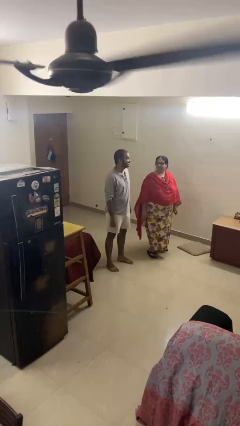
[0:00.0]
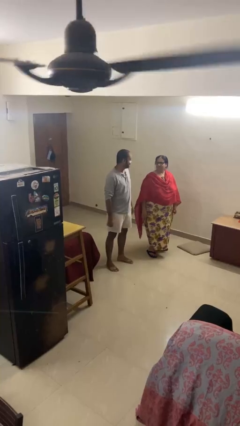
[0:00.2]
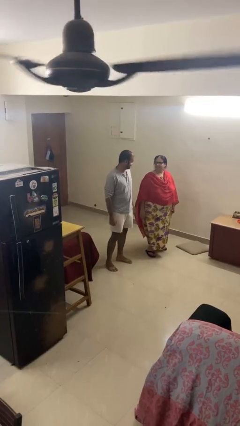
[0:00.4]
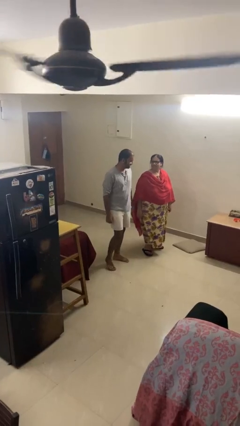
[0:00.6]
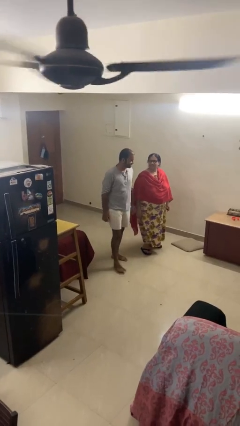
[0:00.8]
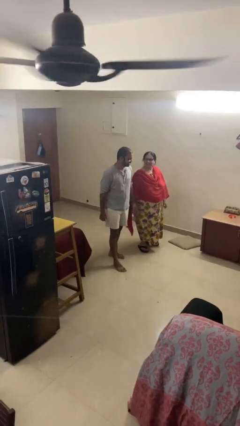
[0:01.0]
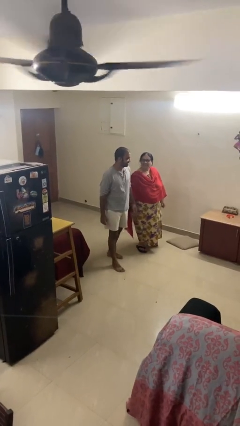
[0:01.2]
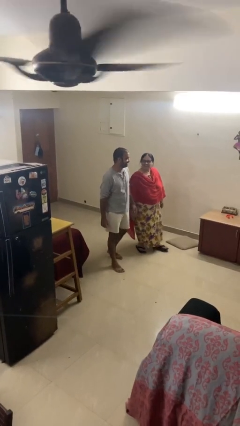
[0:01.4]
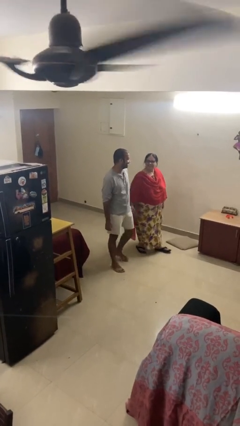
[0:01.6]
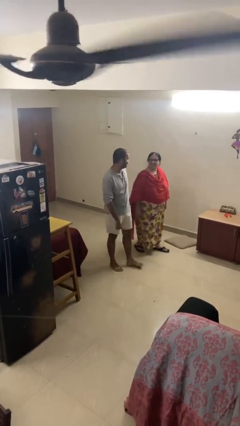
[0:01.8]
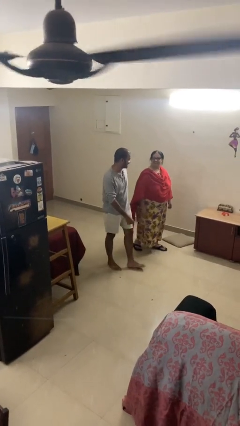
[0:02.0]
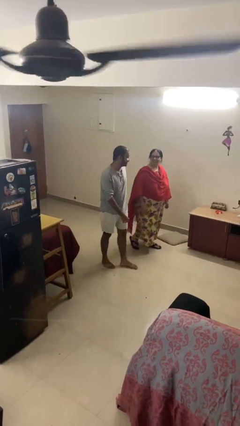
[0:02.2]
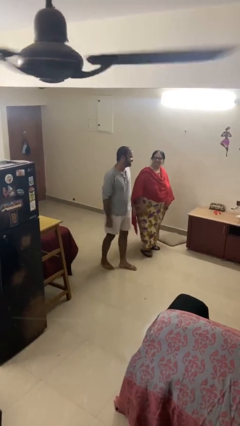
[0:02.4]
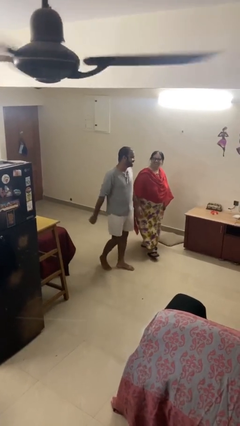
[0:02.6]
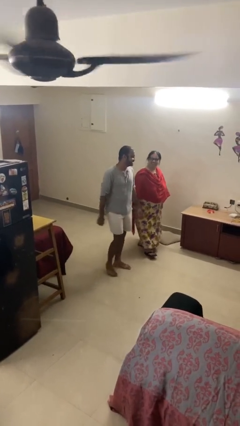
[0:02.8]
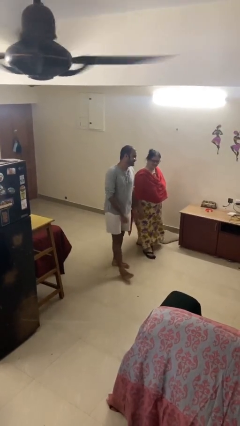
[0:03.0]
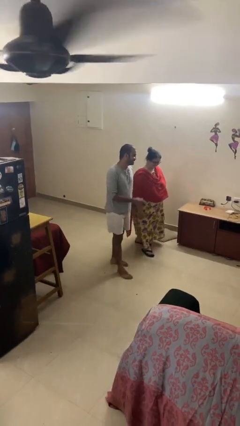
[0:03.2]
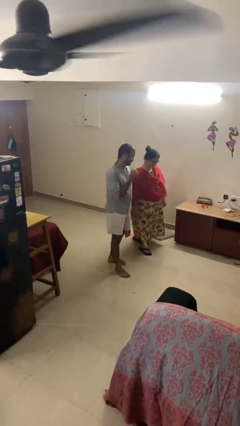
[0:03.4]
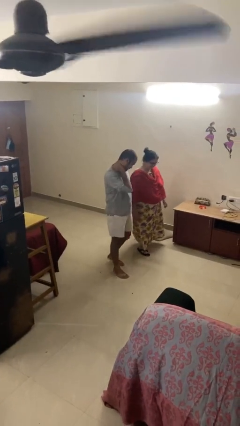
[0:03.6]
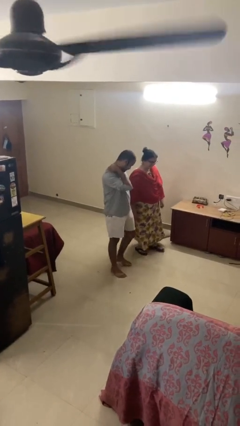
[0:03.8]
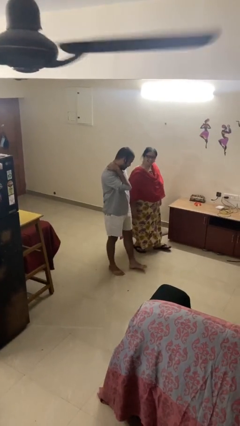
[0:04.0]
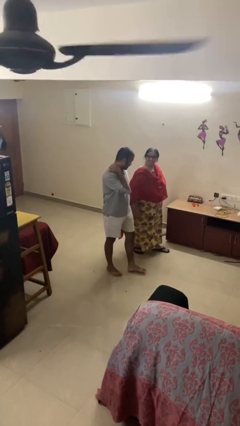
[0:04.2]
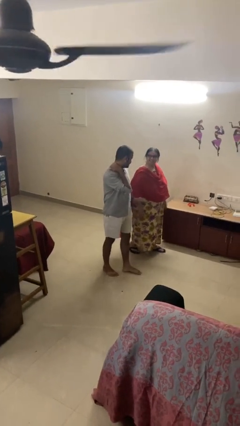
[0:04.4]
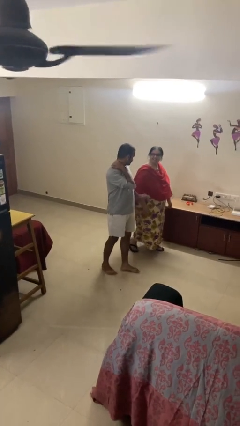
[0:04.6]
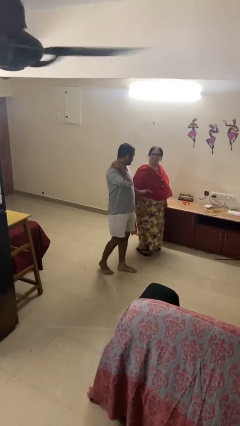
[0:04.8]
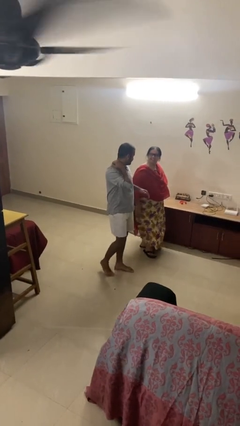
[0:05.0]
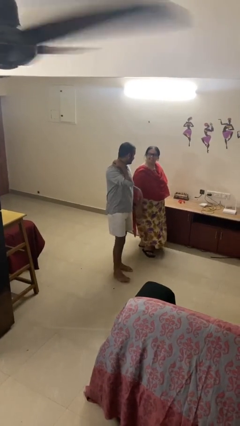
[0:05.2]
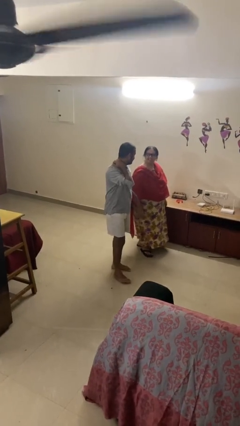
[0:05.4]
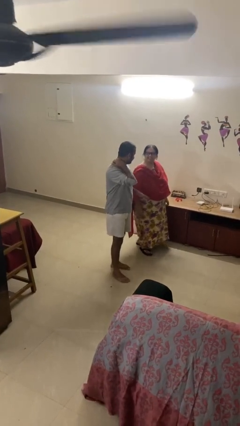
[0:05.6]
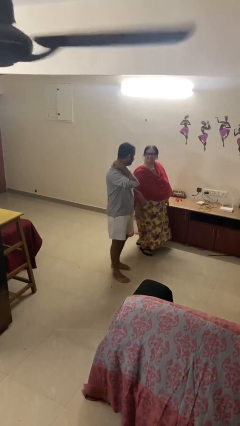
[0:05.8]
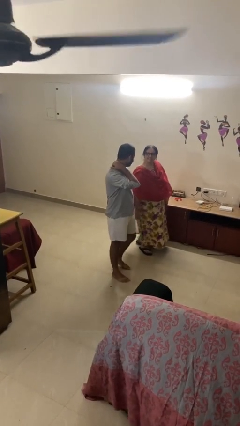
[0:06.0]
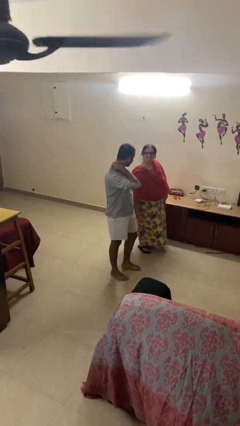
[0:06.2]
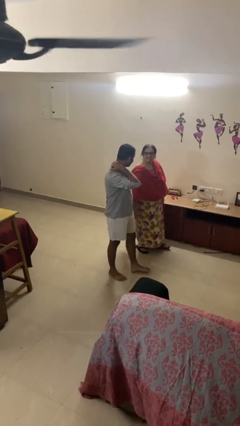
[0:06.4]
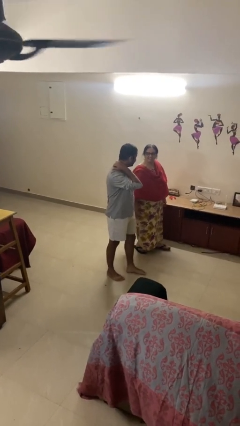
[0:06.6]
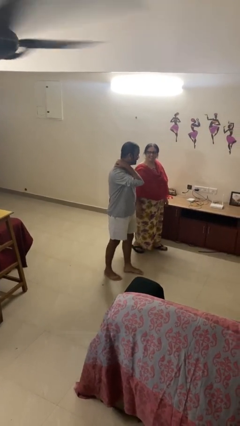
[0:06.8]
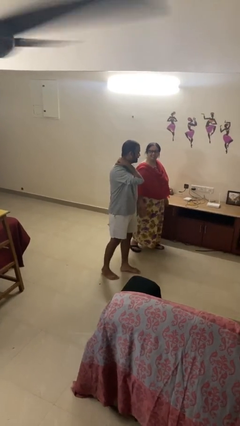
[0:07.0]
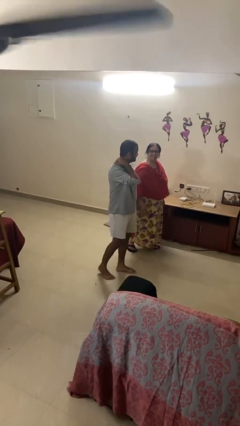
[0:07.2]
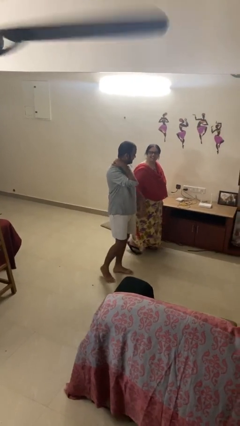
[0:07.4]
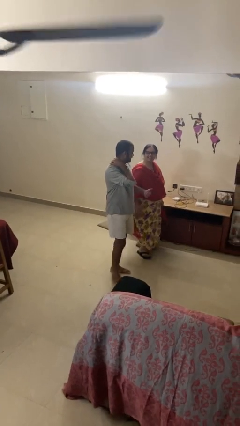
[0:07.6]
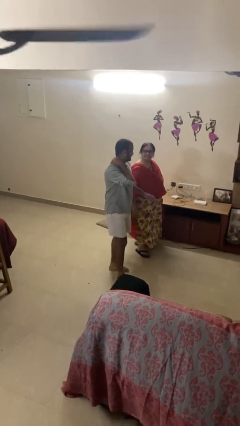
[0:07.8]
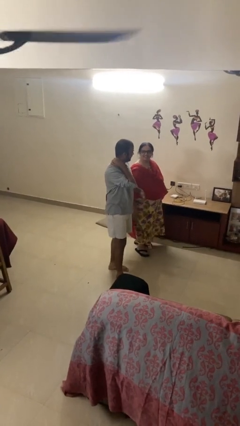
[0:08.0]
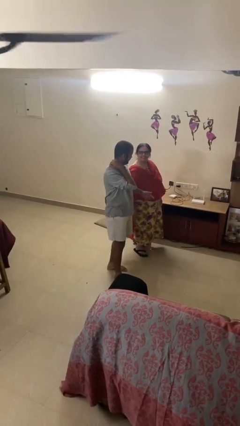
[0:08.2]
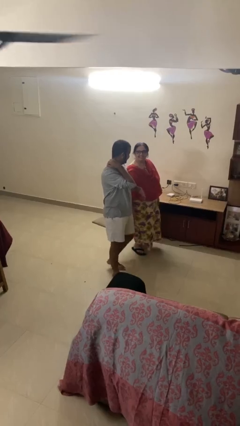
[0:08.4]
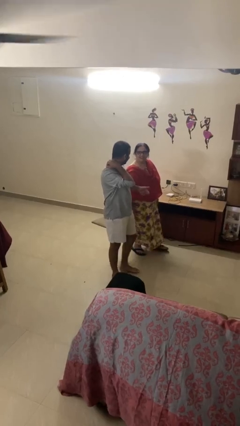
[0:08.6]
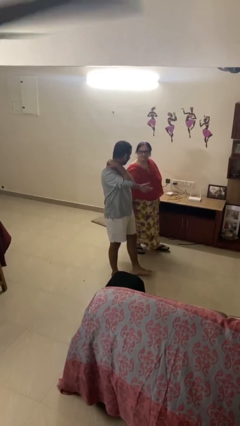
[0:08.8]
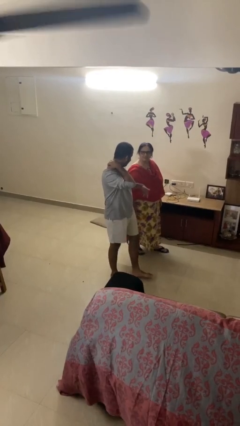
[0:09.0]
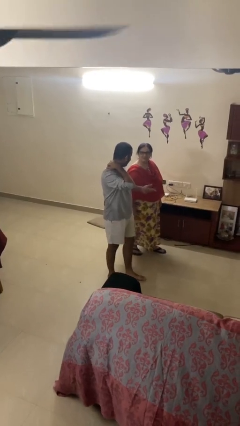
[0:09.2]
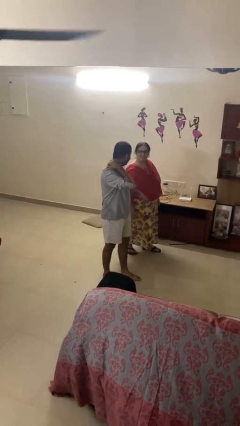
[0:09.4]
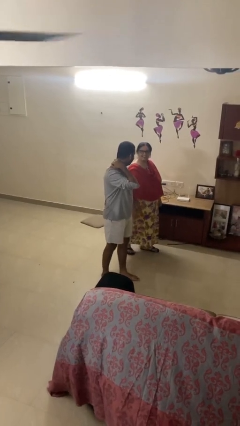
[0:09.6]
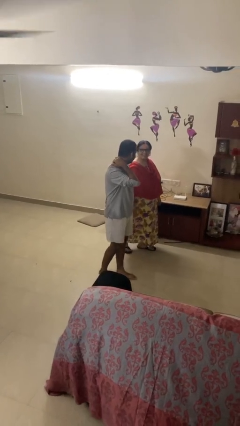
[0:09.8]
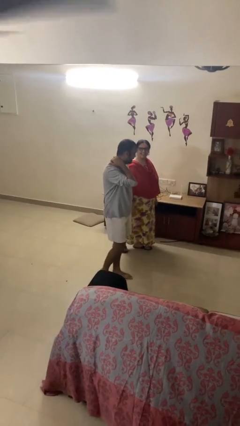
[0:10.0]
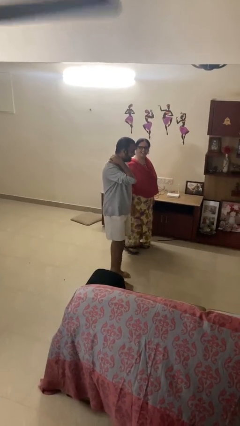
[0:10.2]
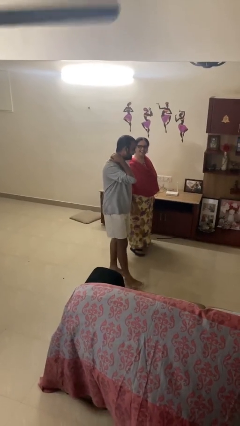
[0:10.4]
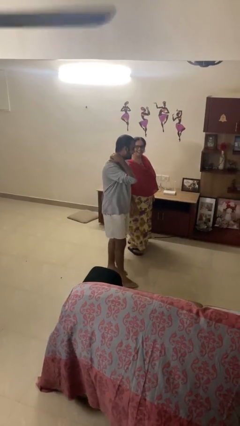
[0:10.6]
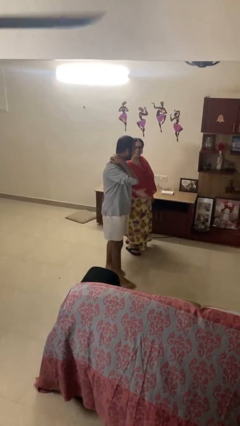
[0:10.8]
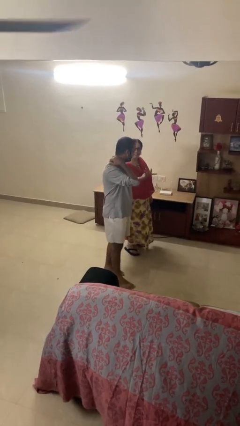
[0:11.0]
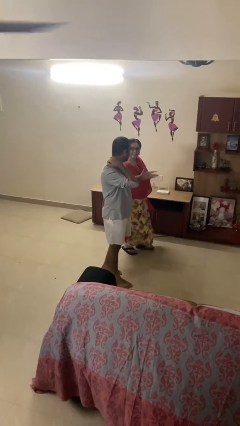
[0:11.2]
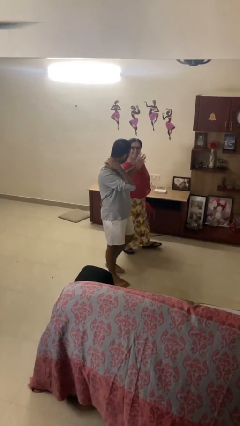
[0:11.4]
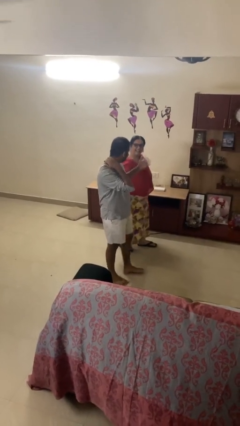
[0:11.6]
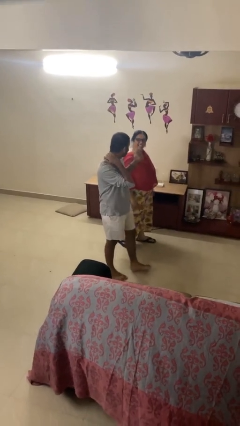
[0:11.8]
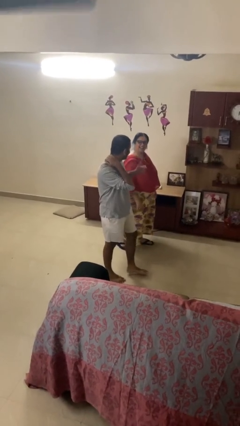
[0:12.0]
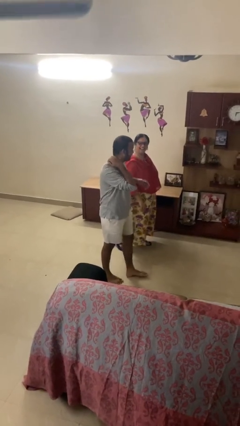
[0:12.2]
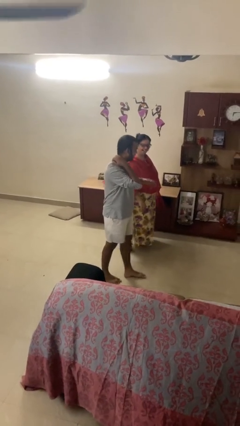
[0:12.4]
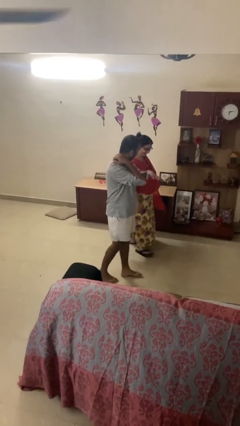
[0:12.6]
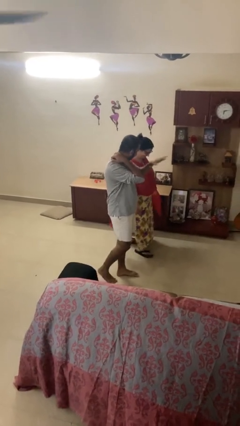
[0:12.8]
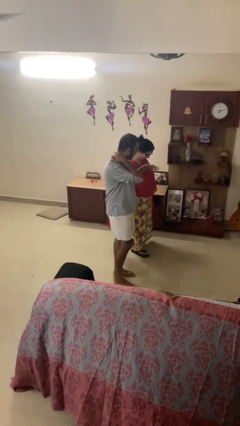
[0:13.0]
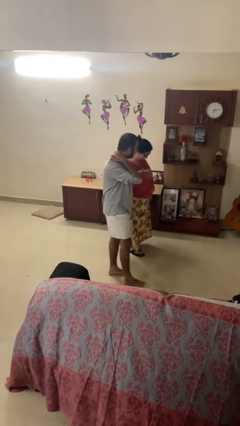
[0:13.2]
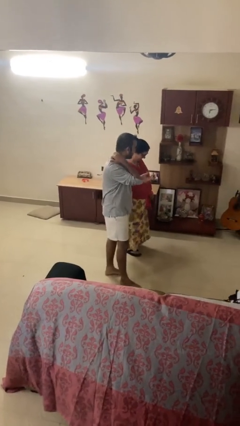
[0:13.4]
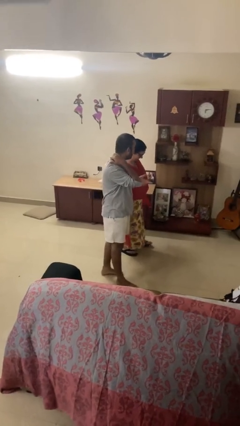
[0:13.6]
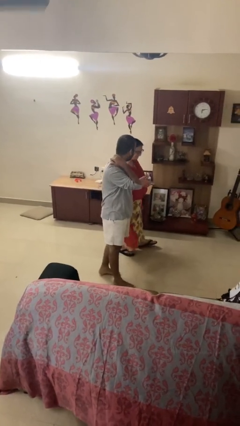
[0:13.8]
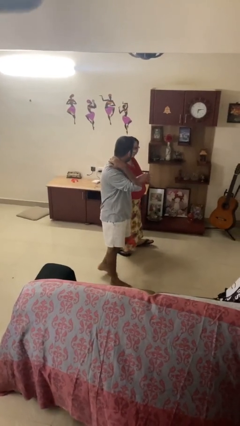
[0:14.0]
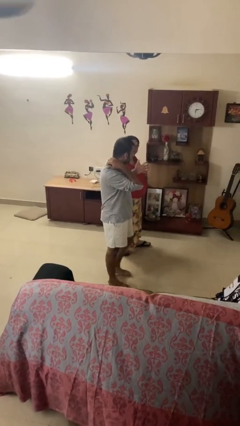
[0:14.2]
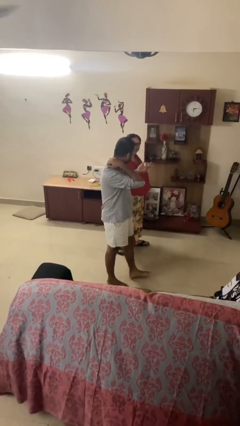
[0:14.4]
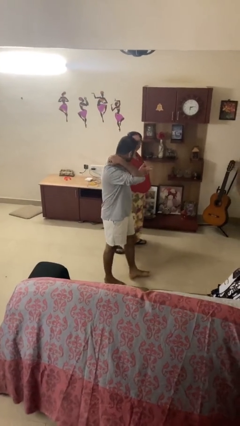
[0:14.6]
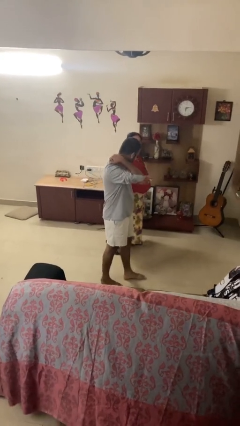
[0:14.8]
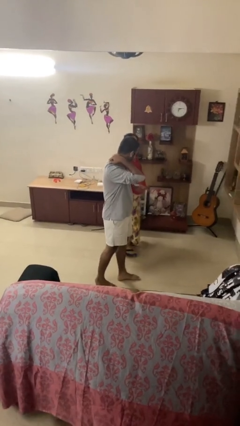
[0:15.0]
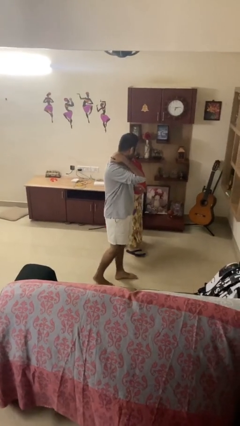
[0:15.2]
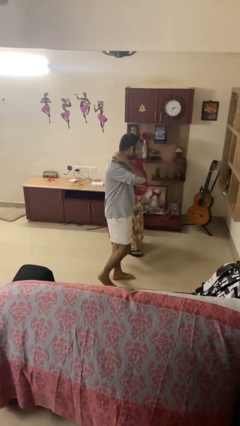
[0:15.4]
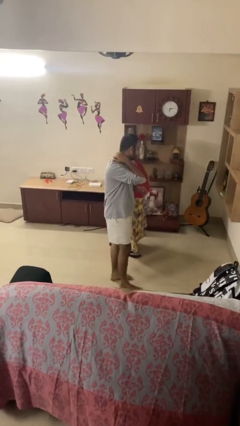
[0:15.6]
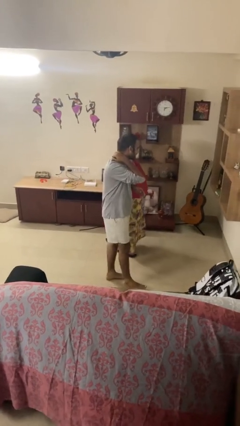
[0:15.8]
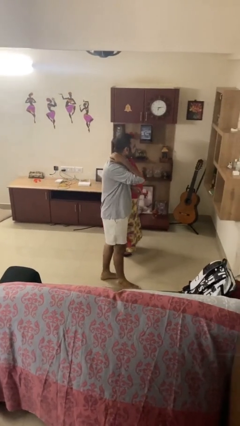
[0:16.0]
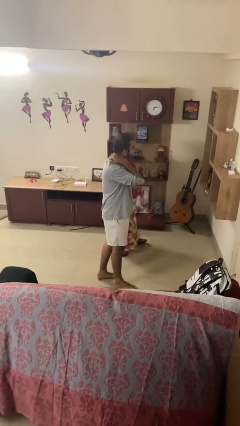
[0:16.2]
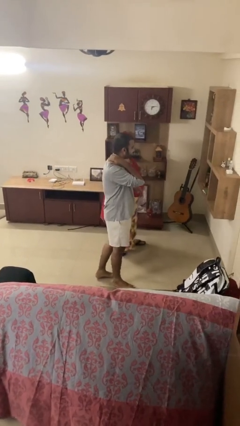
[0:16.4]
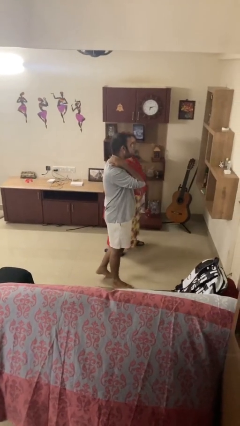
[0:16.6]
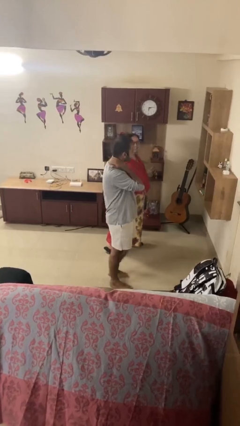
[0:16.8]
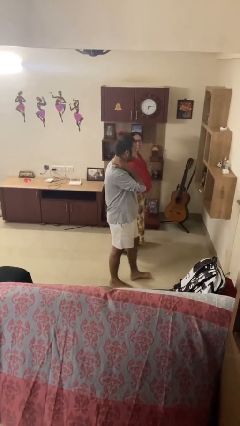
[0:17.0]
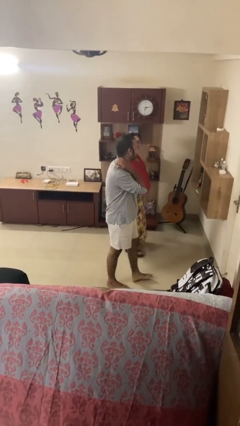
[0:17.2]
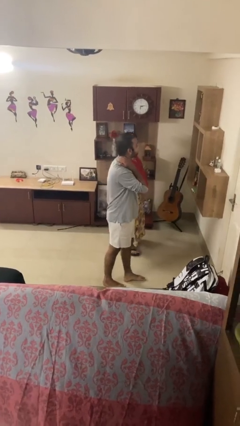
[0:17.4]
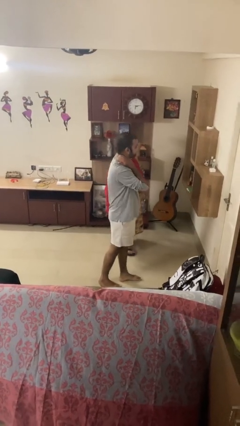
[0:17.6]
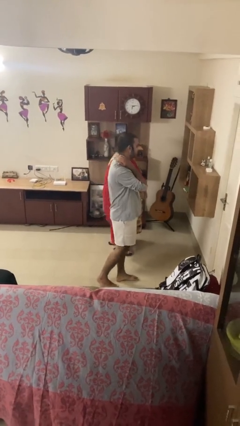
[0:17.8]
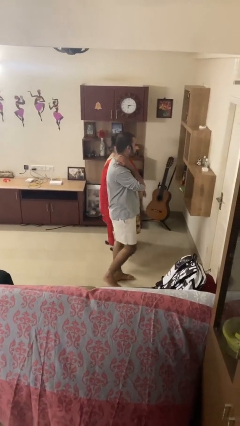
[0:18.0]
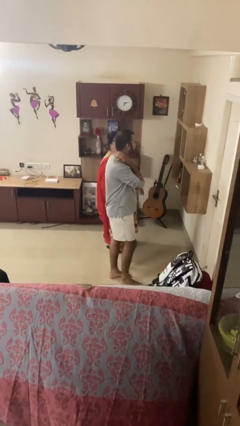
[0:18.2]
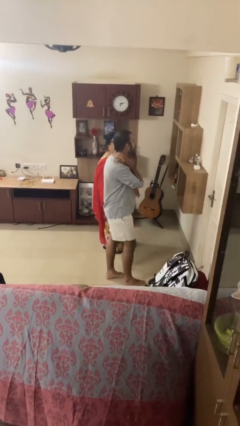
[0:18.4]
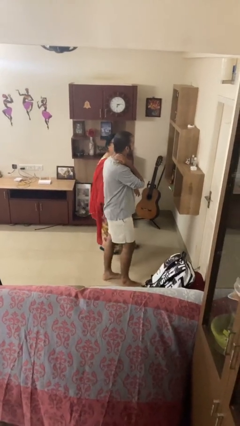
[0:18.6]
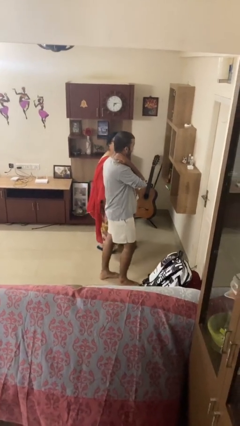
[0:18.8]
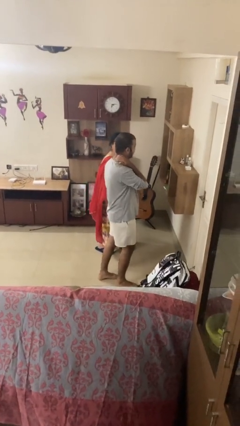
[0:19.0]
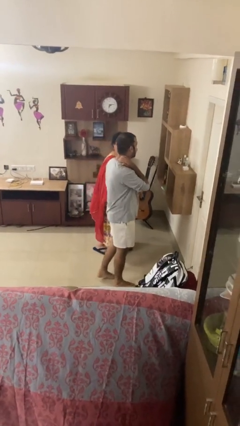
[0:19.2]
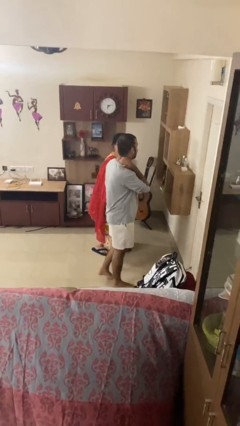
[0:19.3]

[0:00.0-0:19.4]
person talks to person
